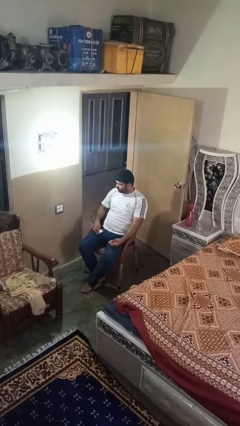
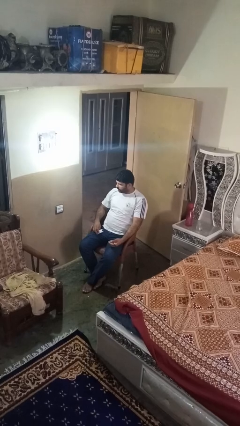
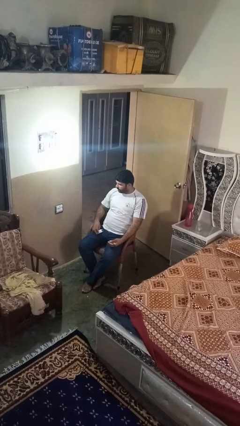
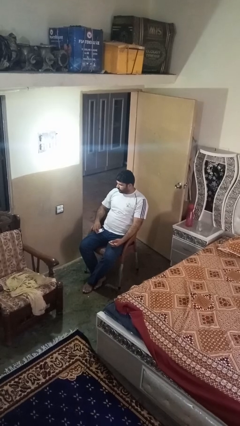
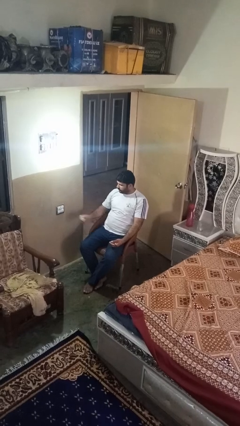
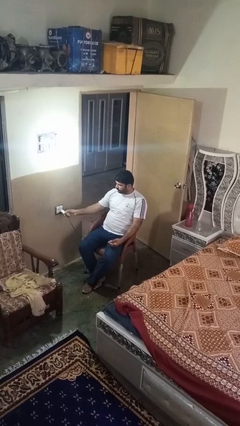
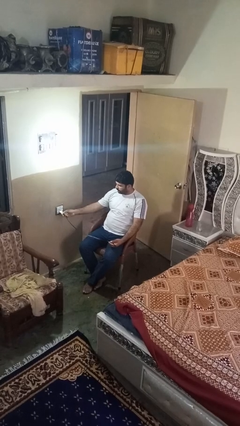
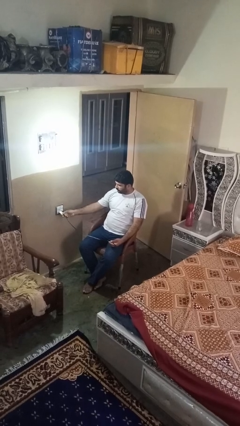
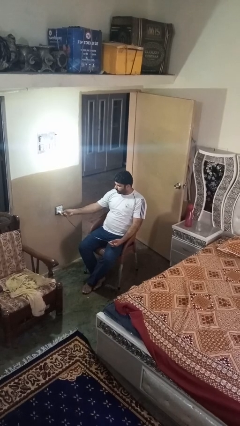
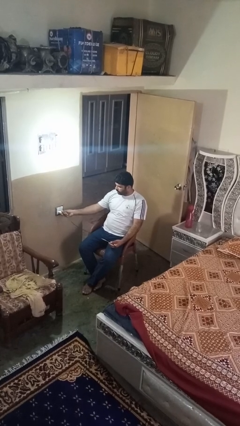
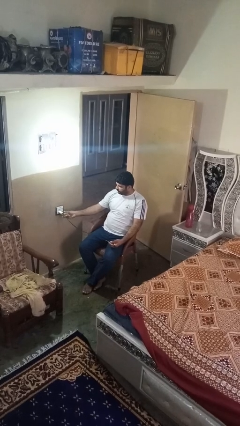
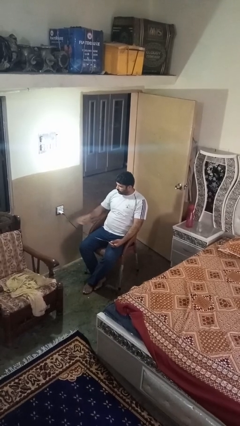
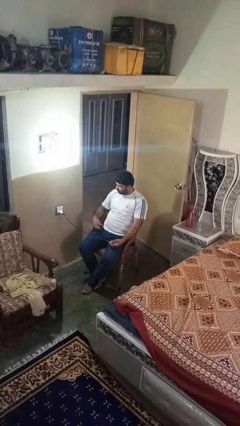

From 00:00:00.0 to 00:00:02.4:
person plugs into electrical socket

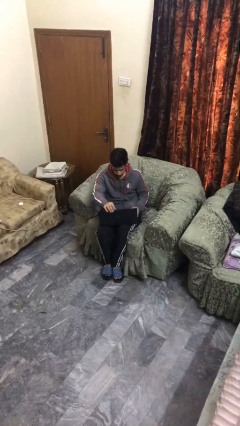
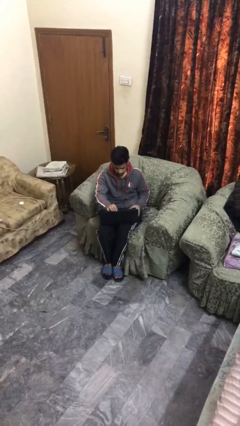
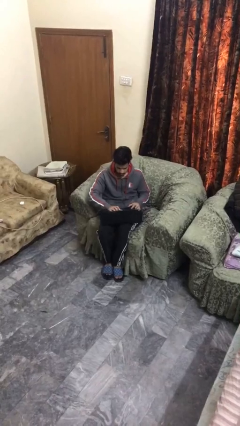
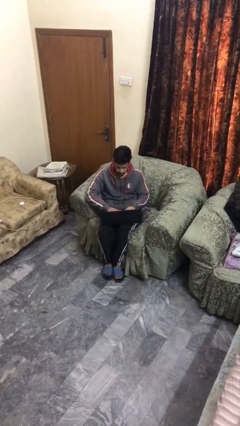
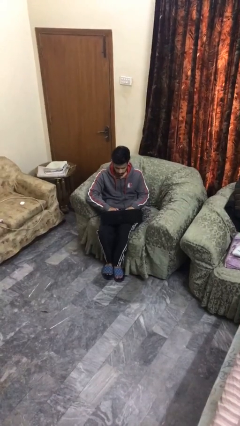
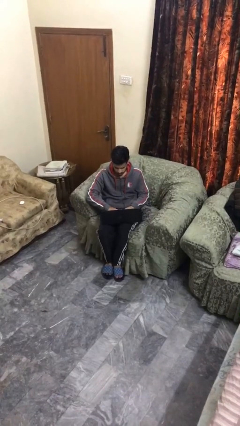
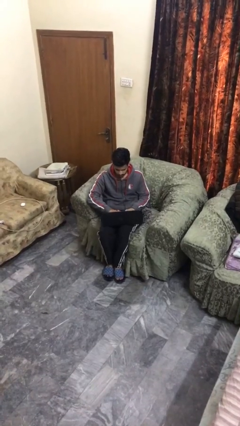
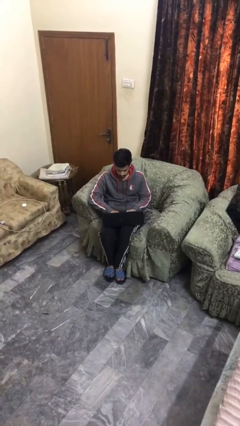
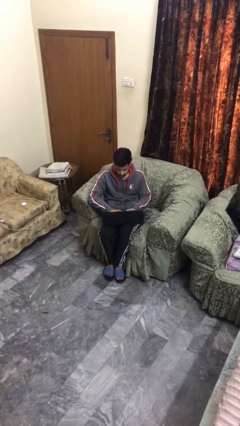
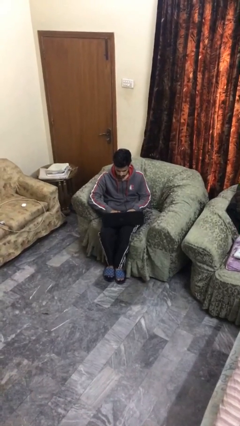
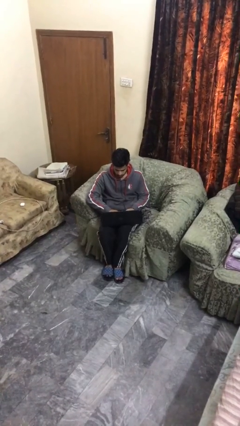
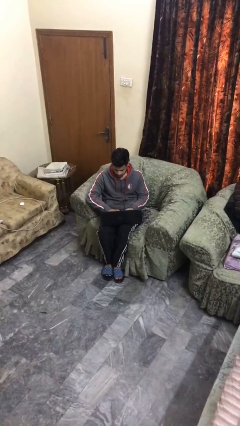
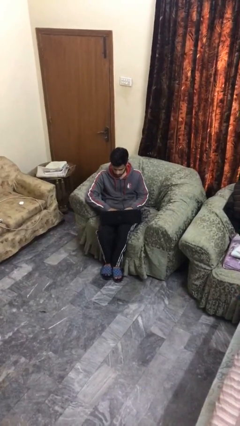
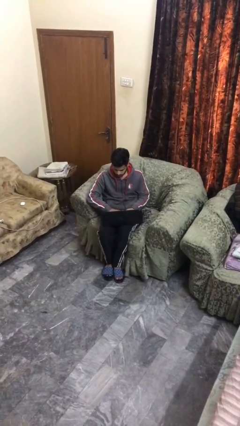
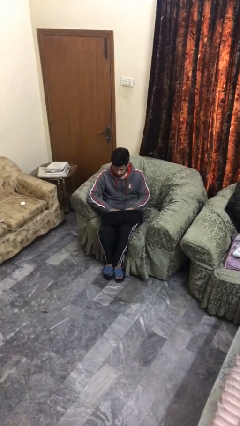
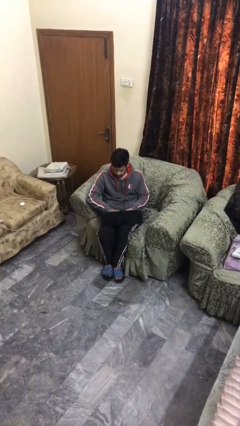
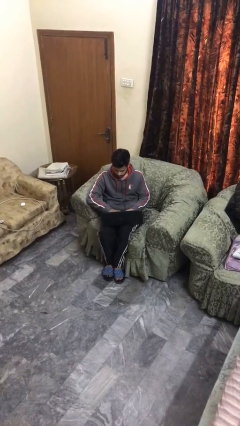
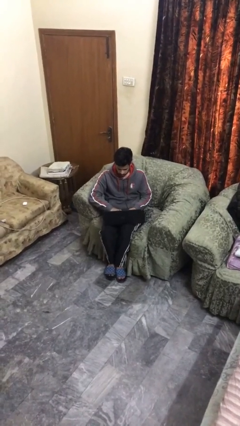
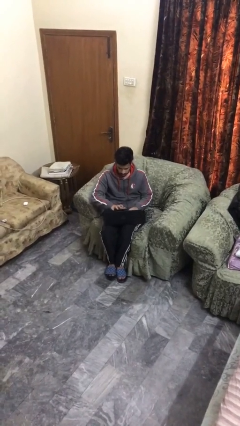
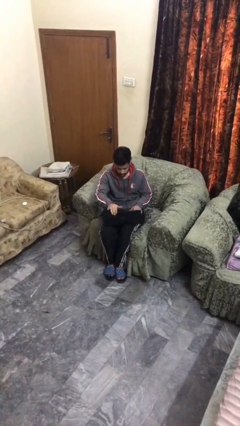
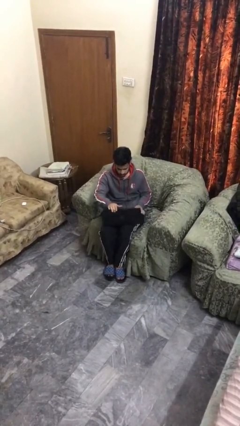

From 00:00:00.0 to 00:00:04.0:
person interacts with laptop

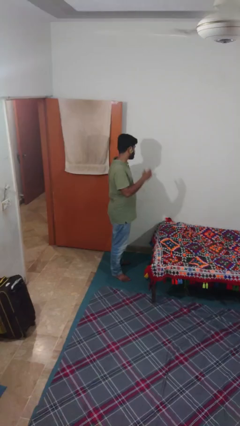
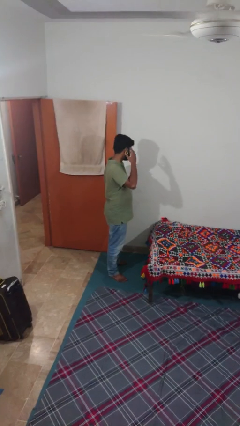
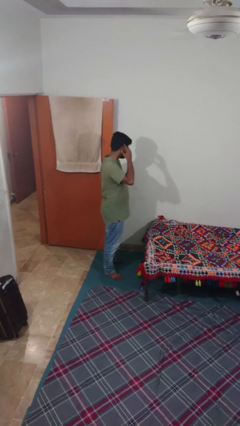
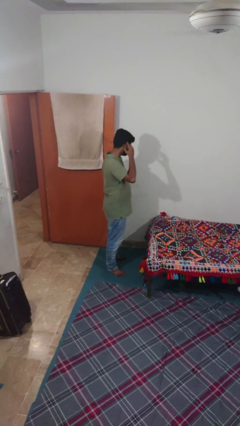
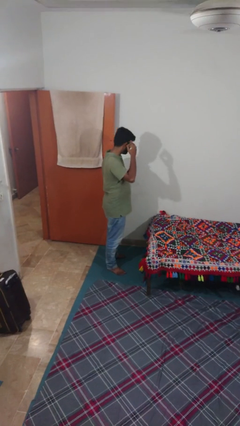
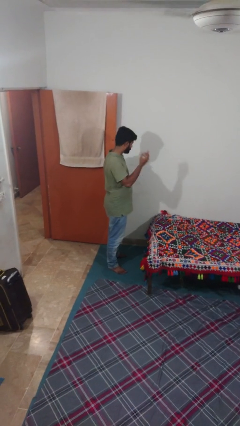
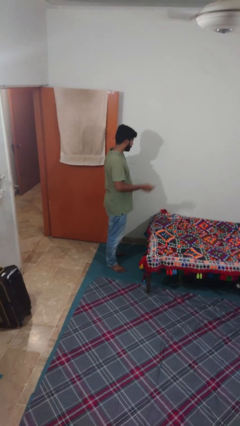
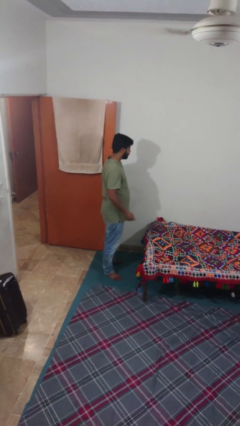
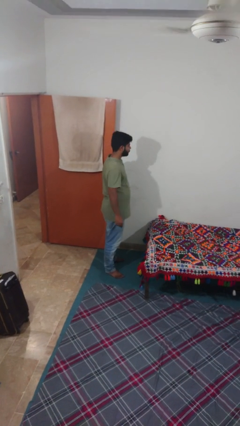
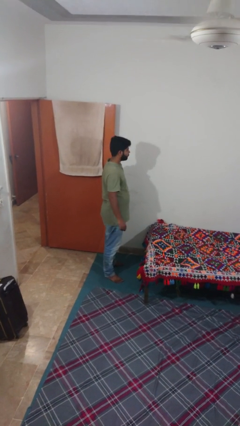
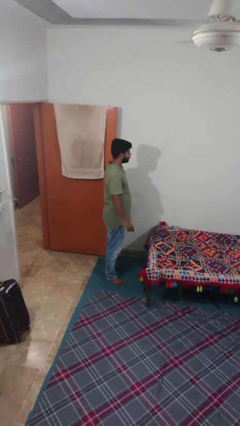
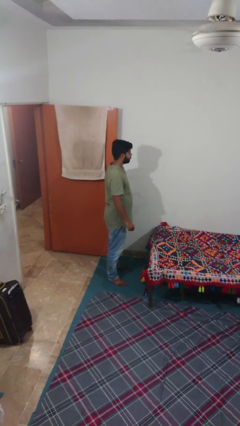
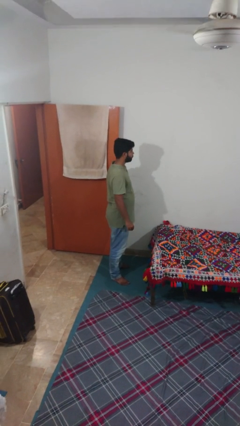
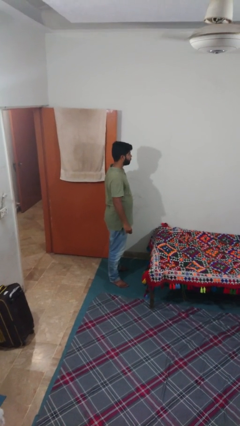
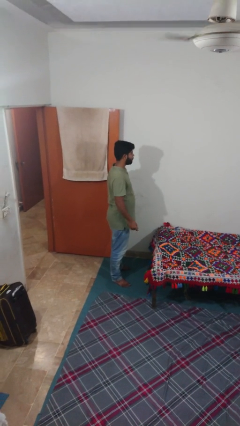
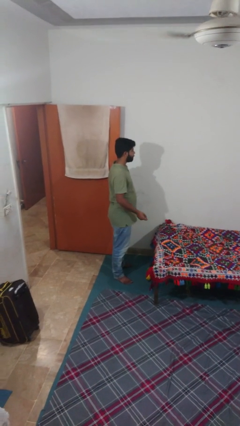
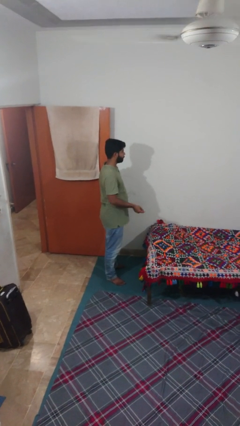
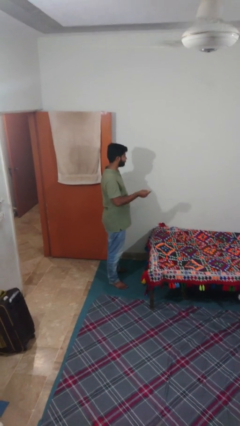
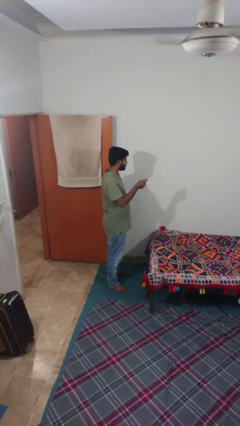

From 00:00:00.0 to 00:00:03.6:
person takes off earrings

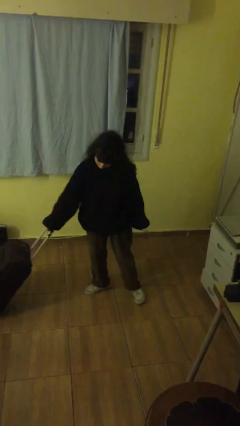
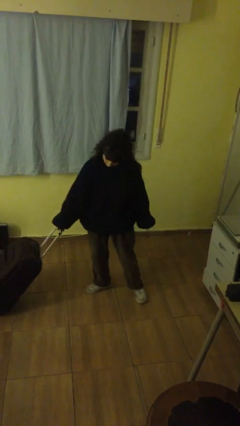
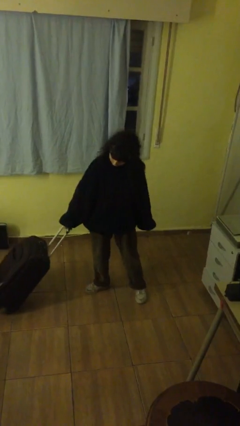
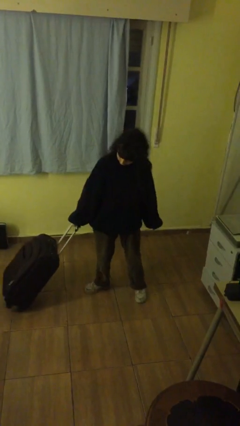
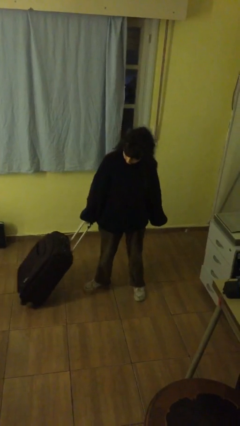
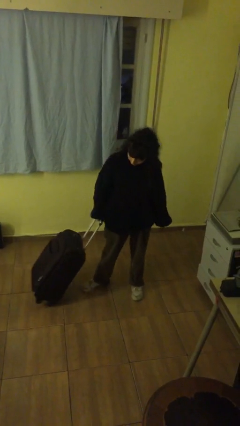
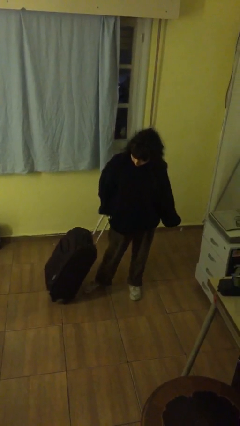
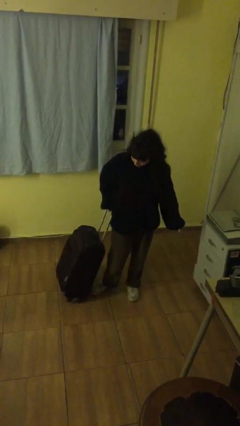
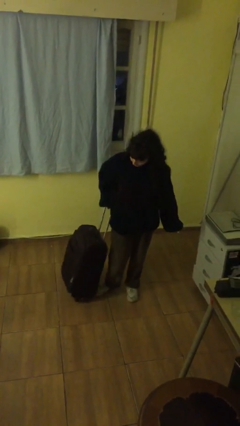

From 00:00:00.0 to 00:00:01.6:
person pulls wheeled cart

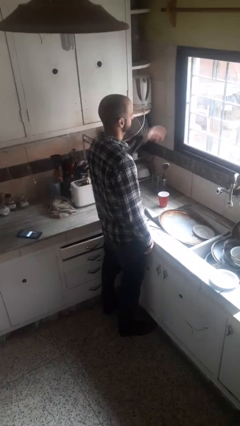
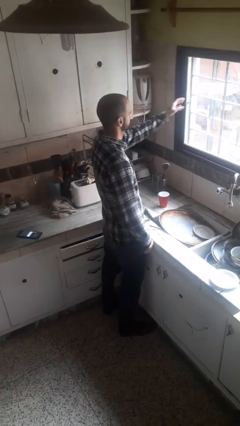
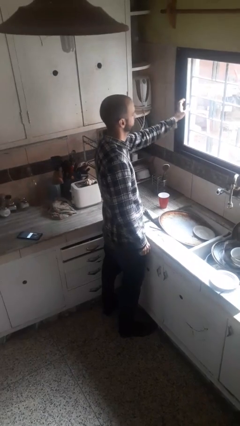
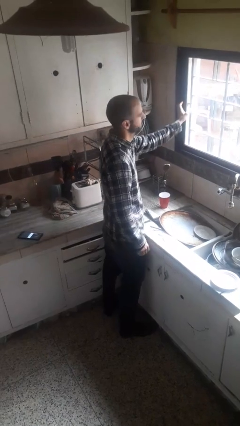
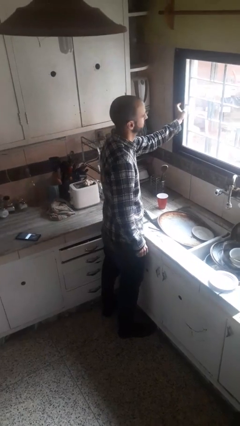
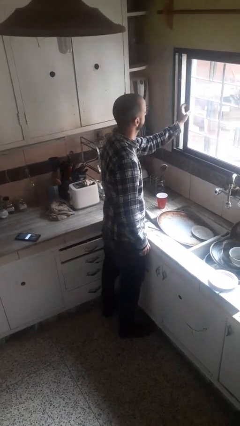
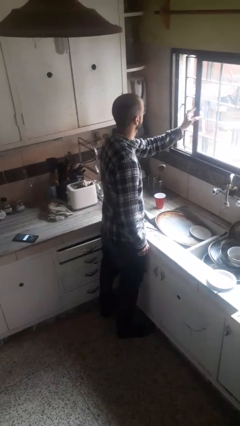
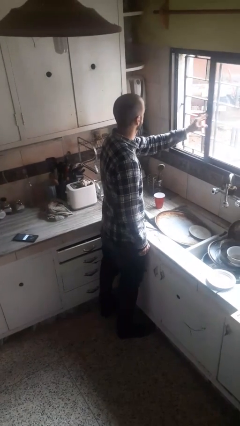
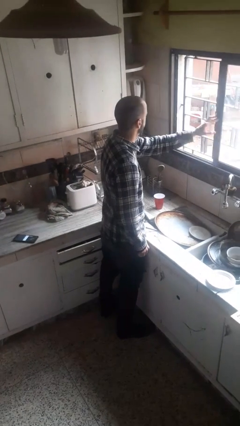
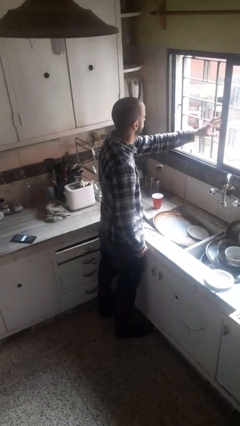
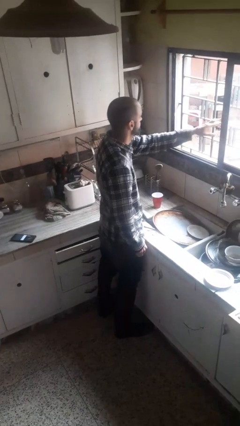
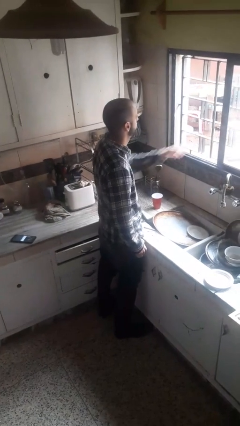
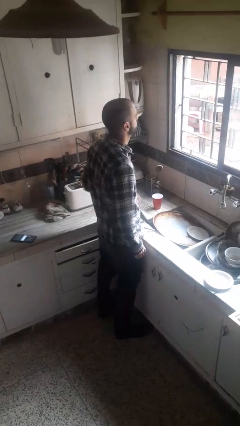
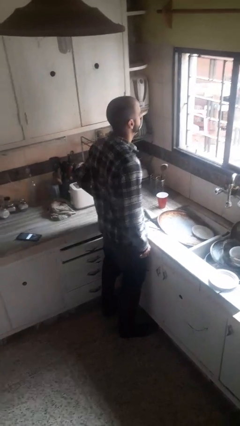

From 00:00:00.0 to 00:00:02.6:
person opens home window

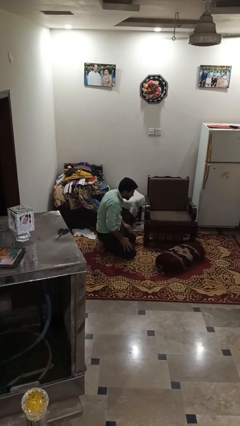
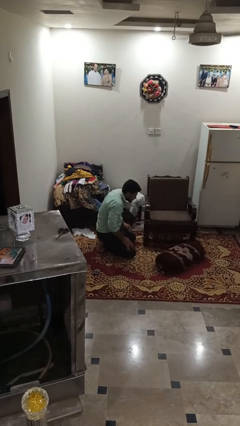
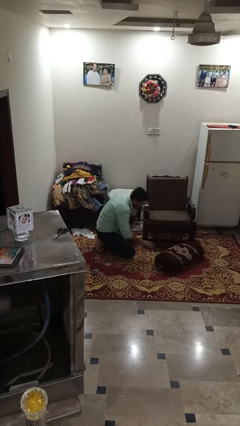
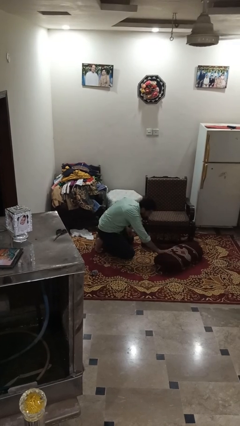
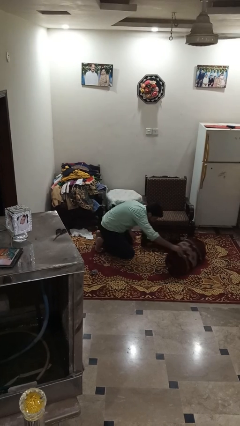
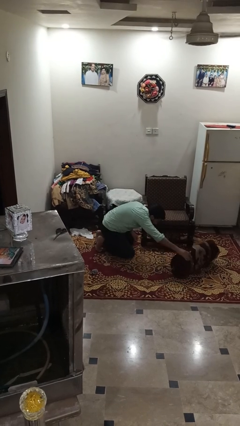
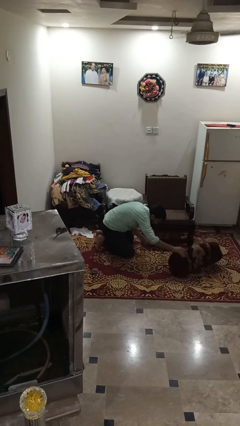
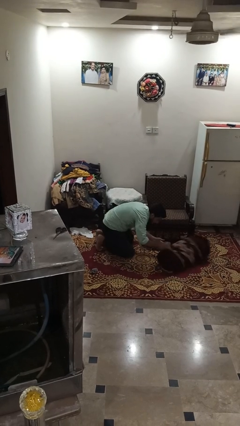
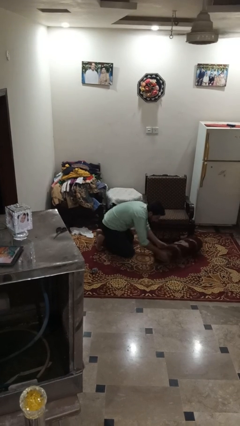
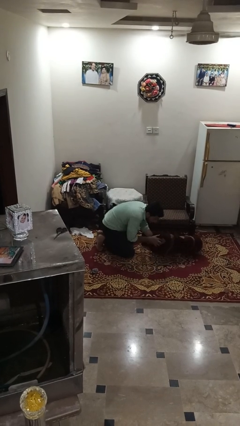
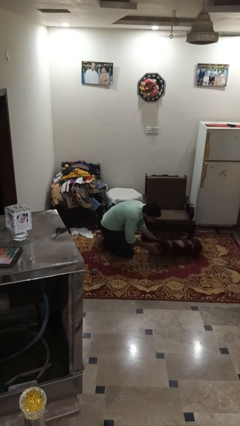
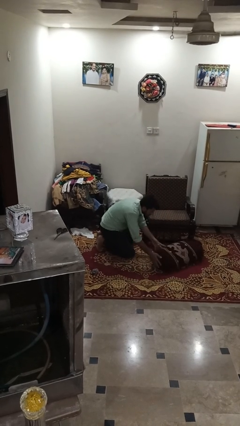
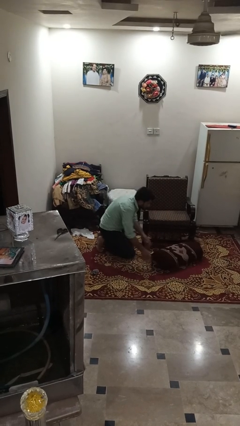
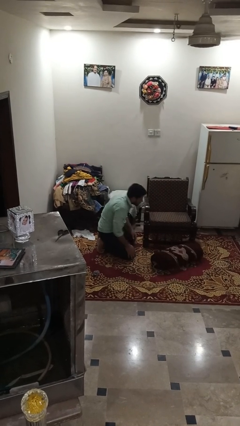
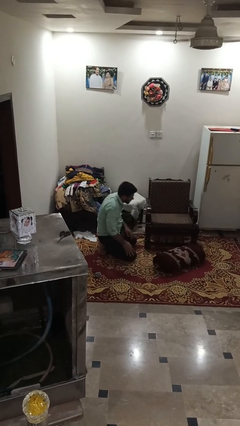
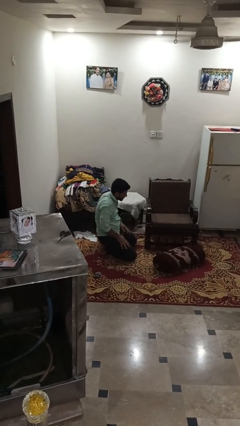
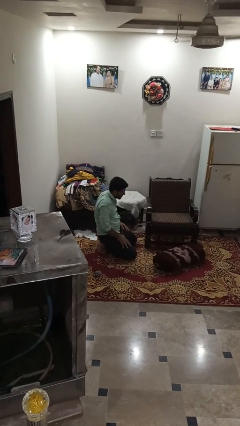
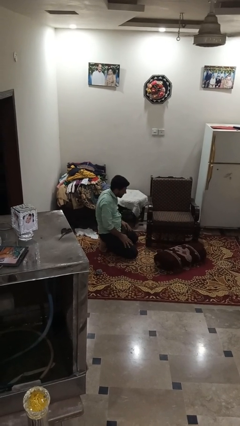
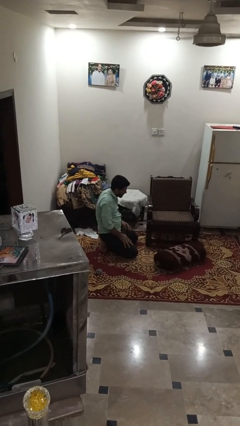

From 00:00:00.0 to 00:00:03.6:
person searches in couch
